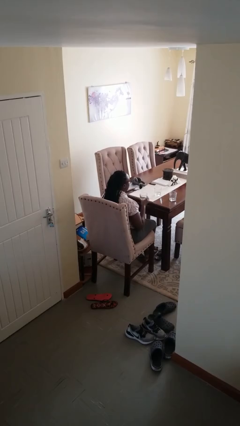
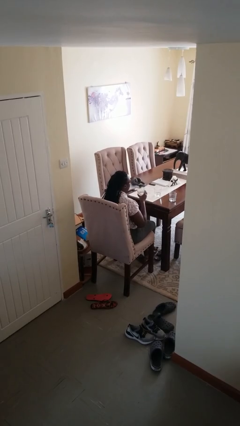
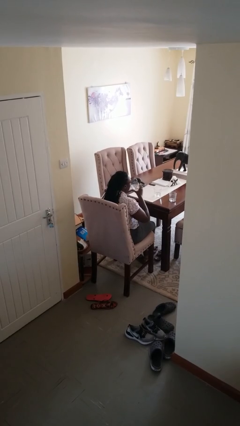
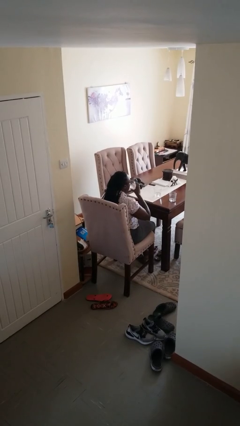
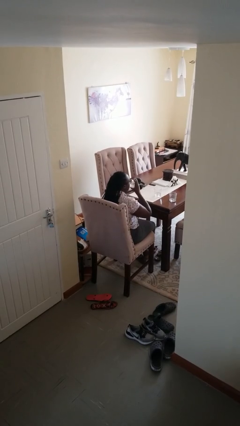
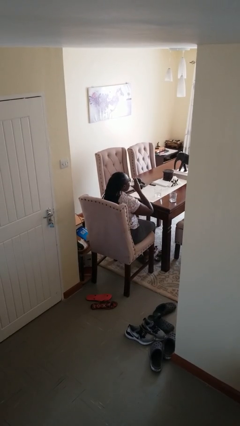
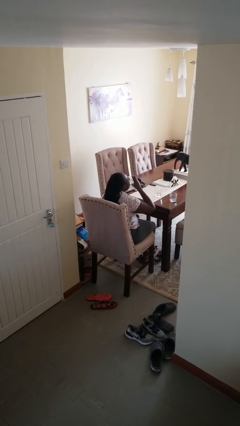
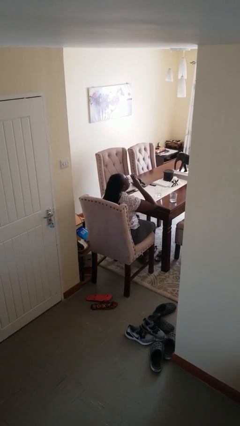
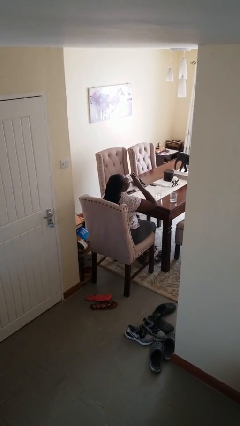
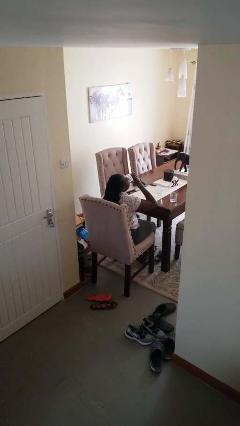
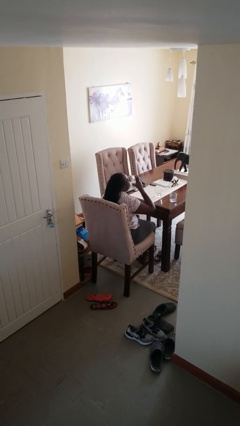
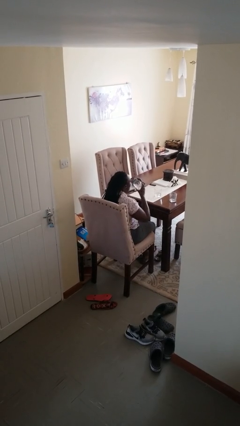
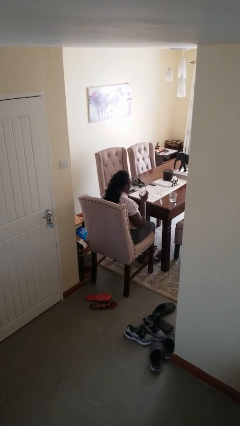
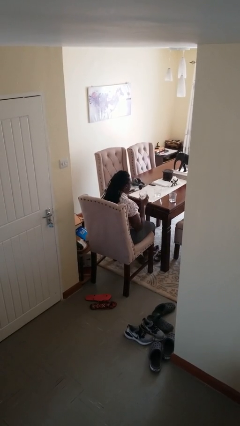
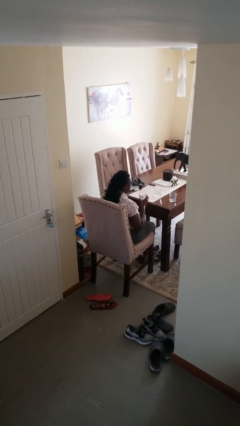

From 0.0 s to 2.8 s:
person drinks from shotglass

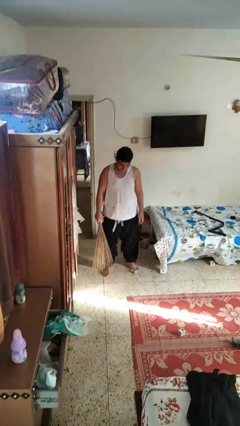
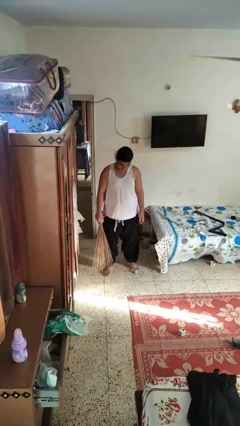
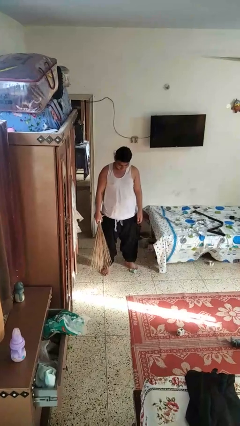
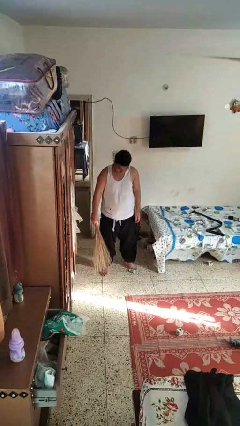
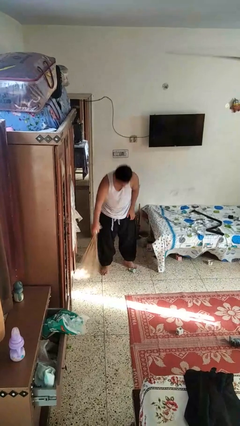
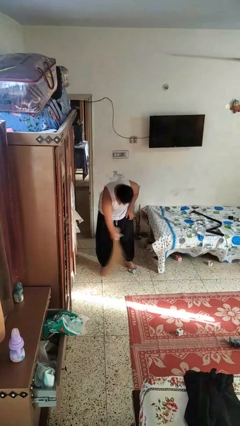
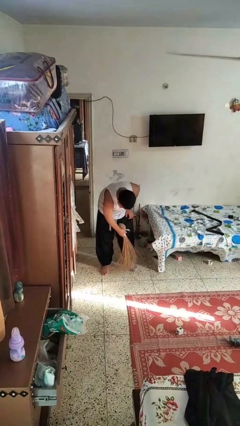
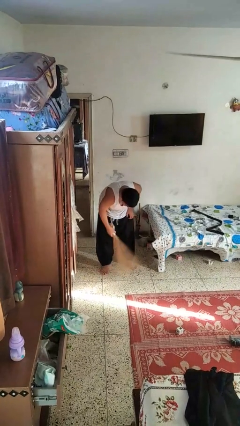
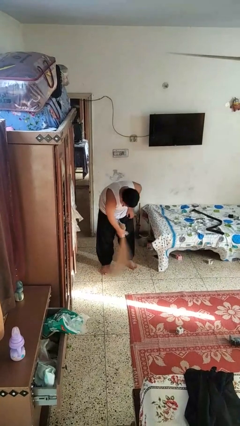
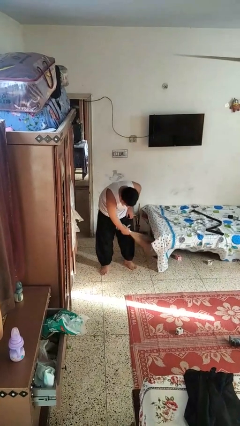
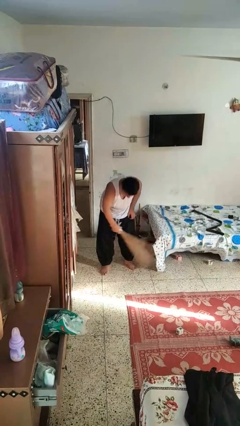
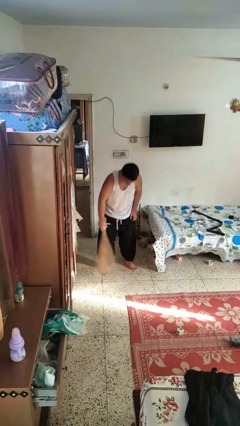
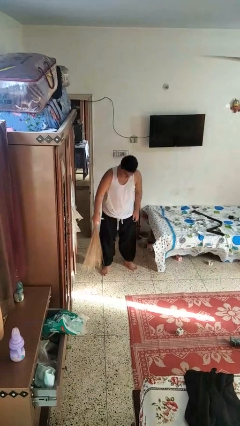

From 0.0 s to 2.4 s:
person sweeps floor

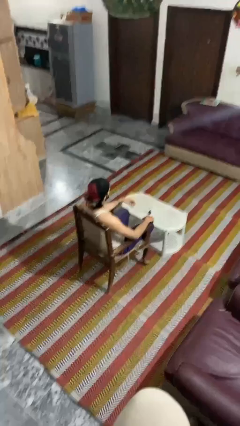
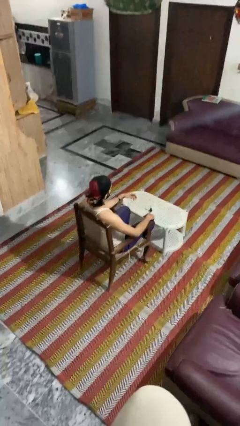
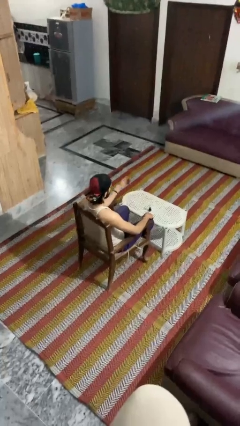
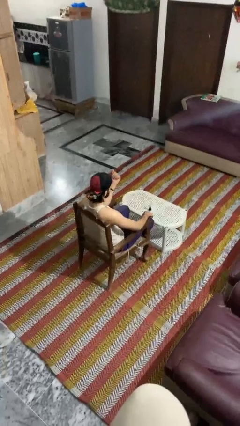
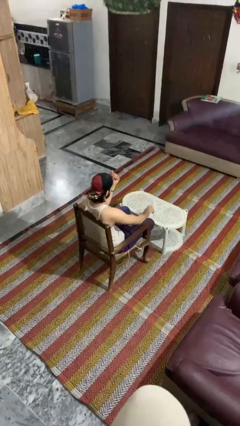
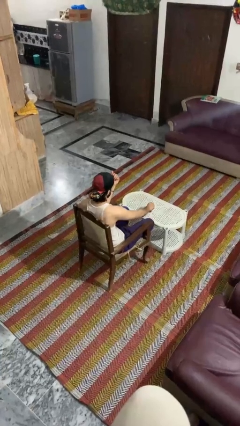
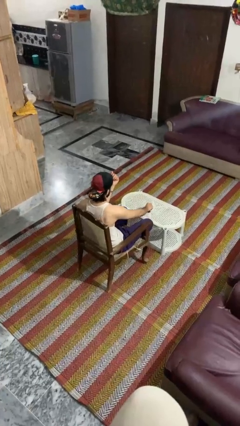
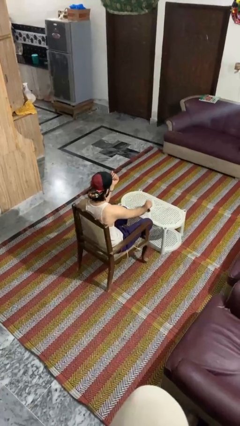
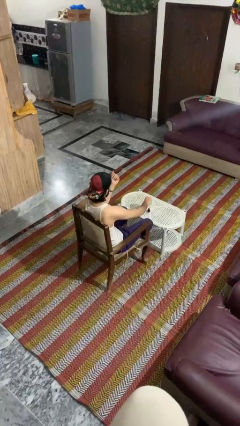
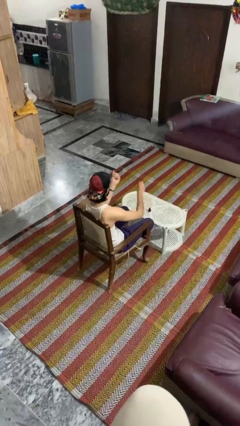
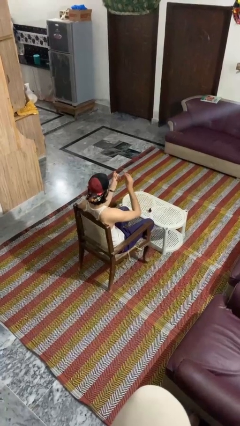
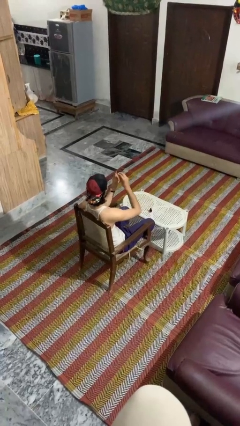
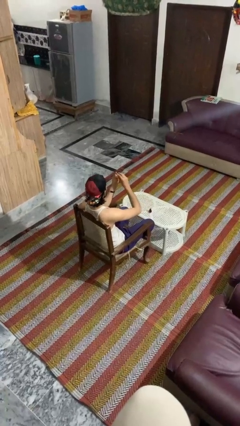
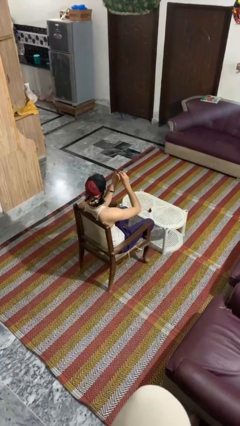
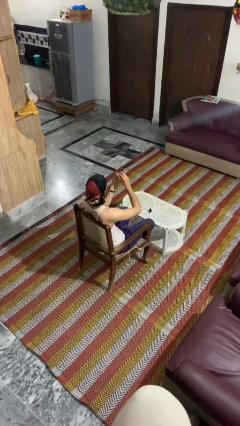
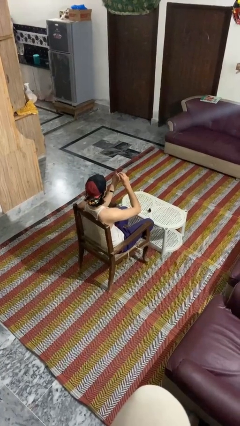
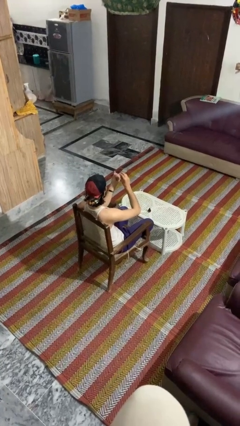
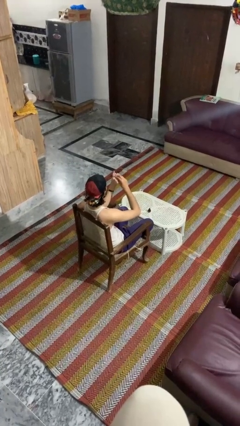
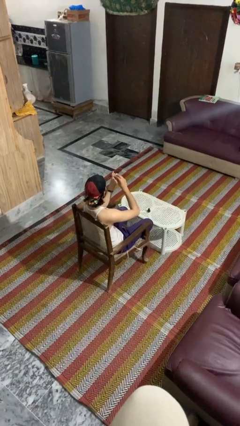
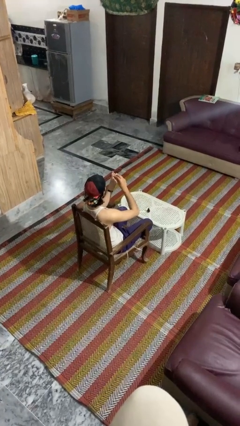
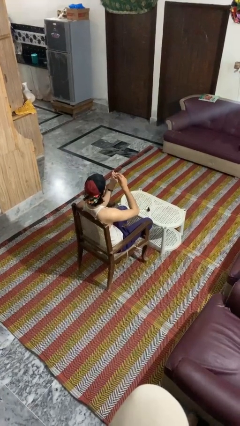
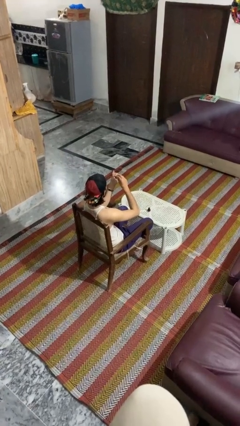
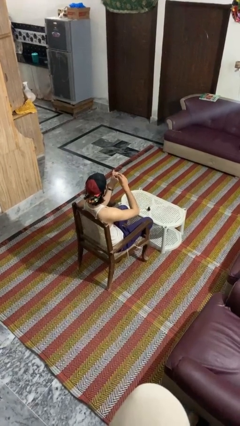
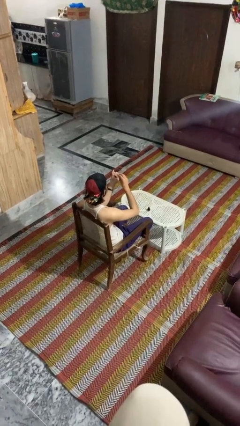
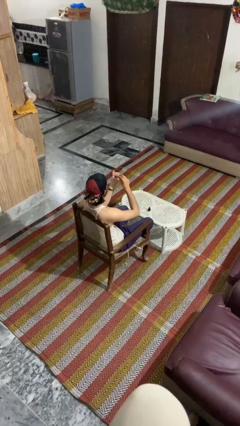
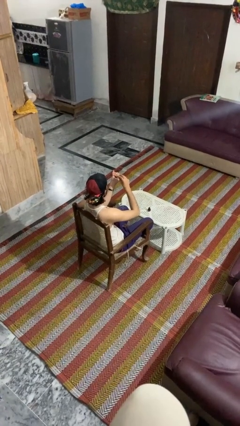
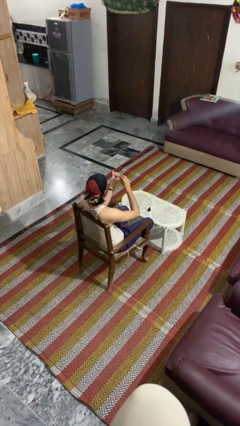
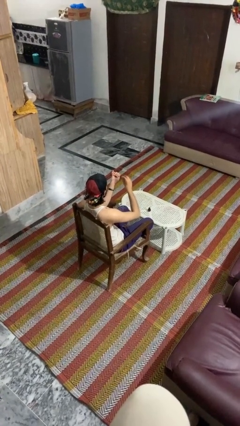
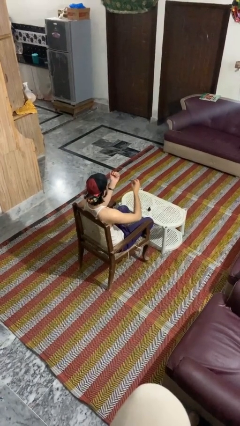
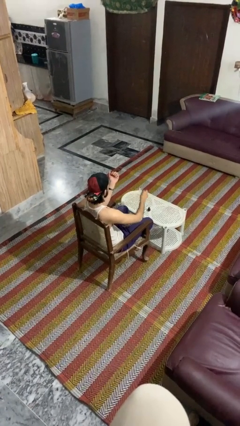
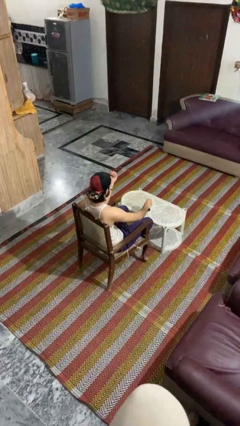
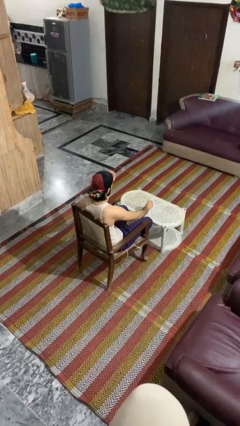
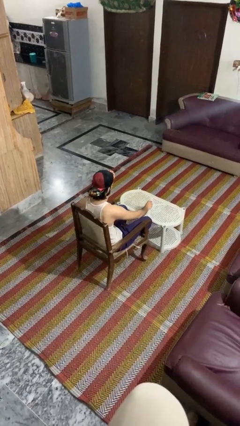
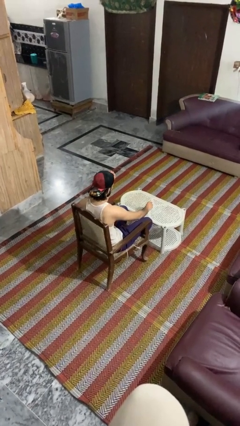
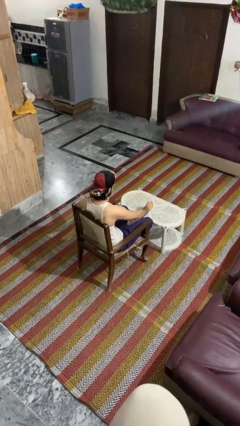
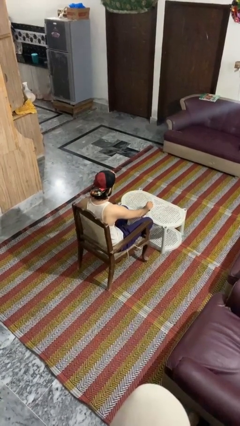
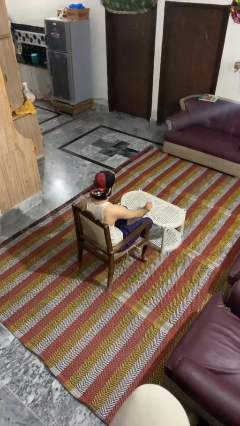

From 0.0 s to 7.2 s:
person paints fingernails

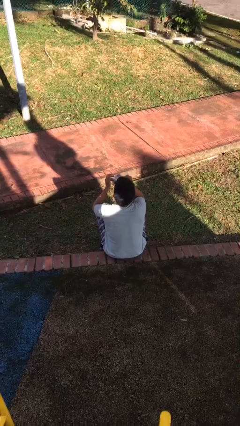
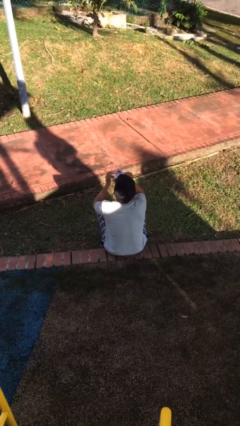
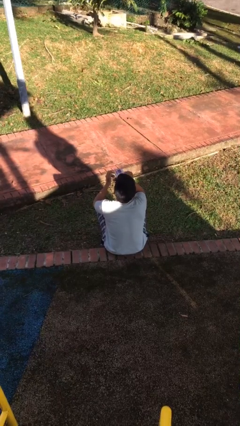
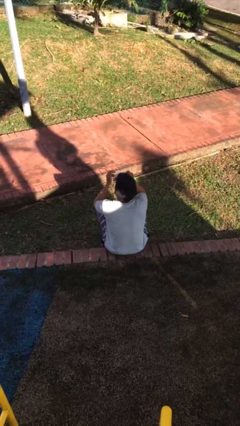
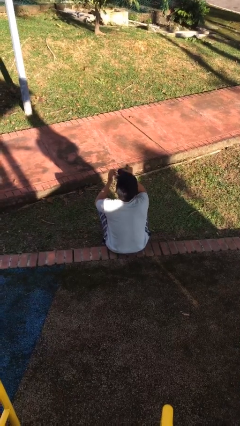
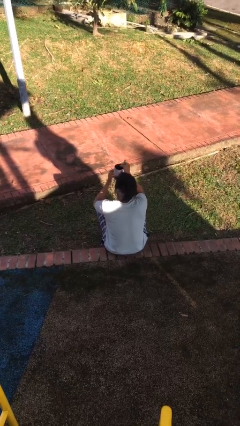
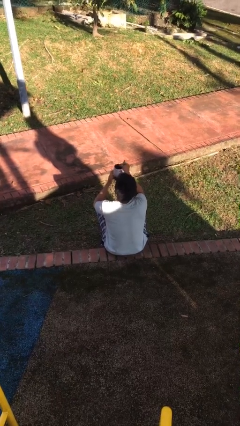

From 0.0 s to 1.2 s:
person drinks from mug

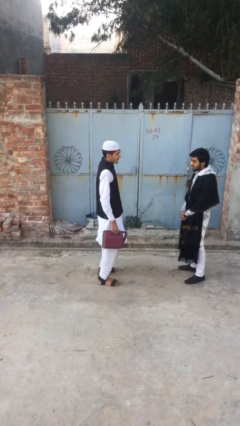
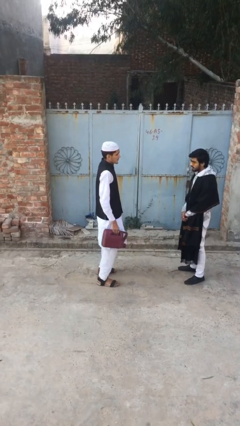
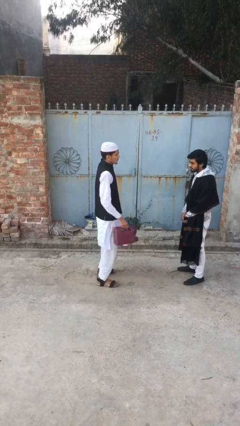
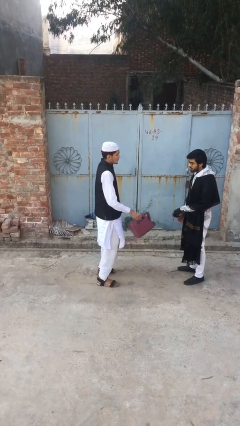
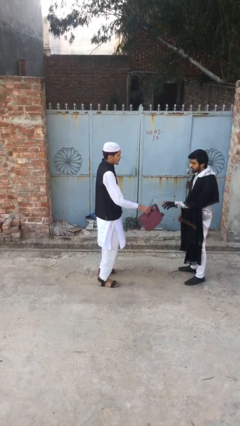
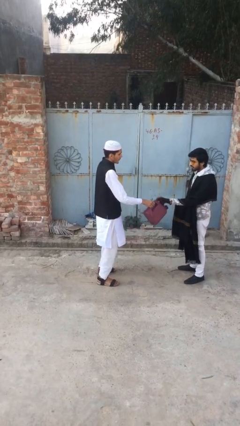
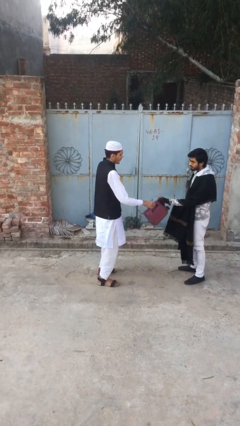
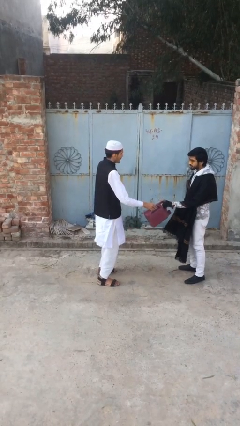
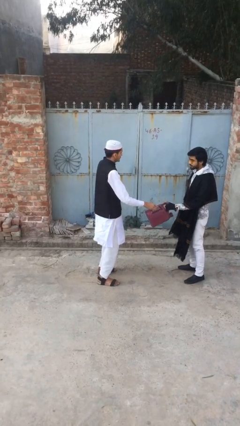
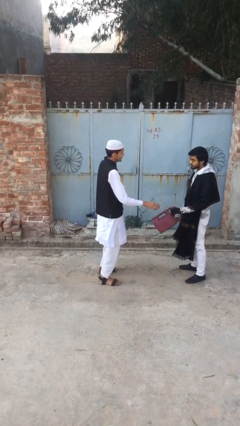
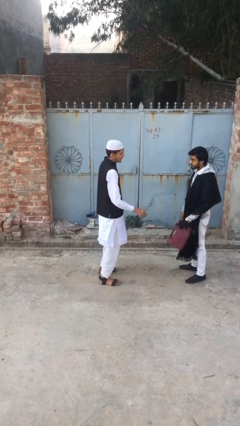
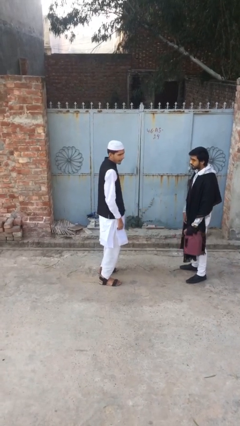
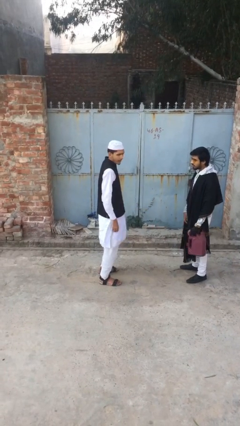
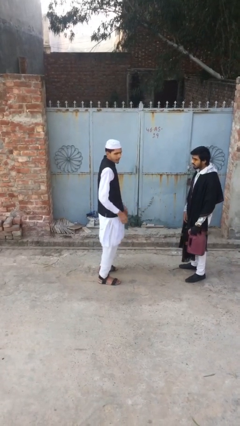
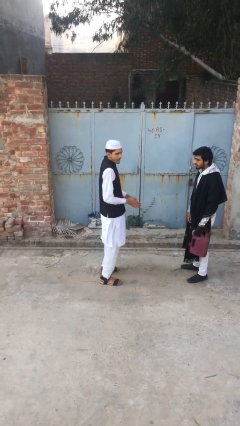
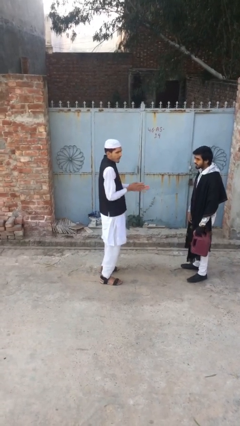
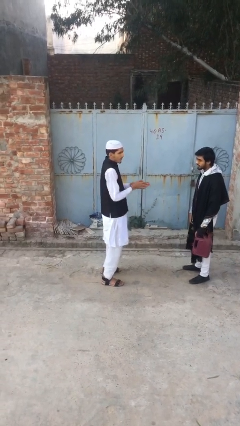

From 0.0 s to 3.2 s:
person transfers object to person

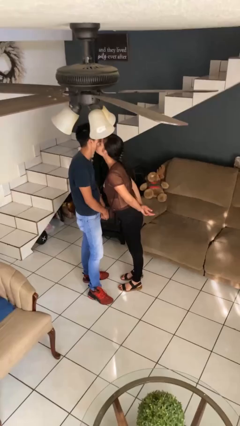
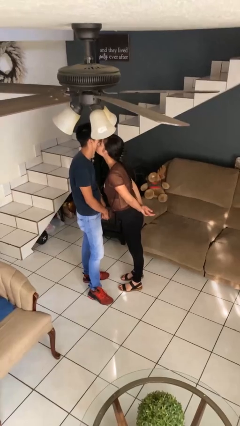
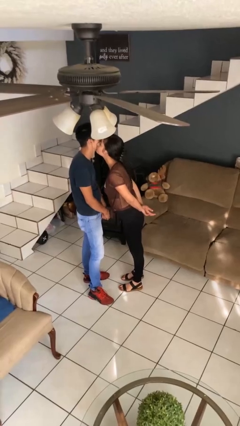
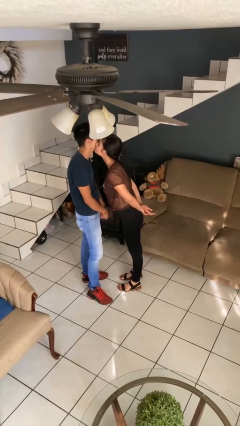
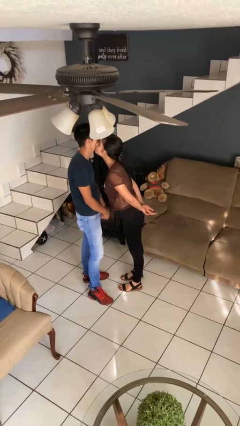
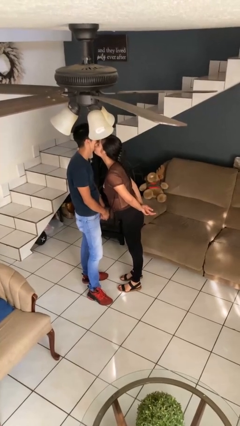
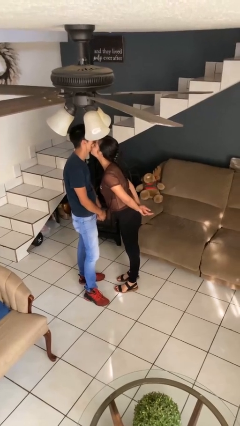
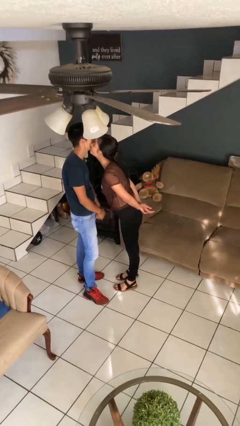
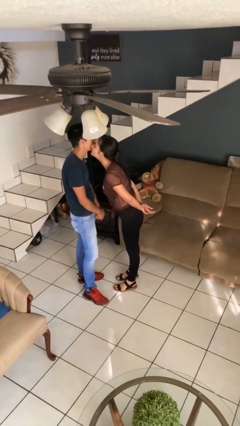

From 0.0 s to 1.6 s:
person kisses cheek of person
